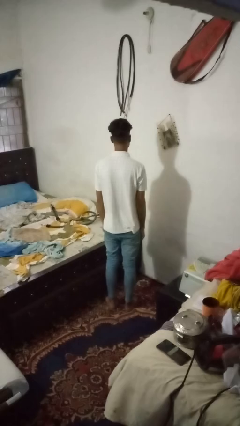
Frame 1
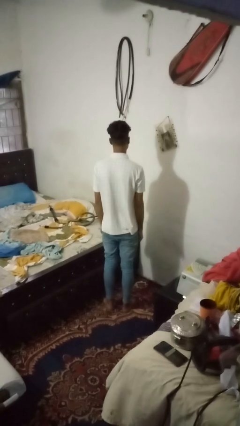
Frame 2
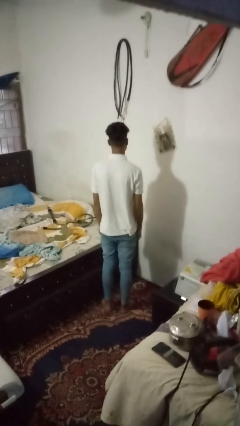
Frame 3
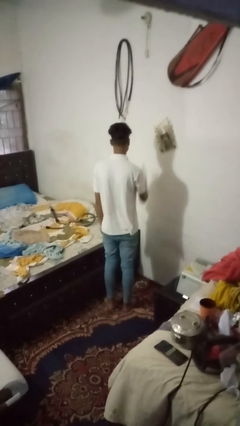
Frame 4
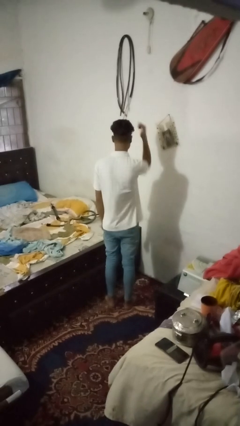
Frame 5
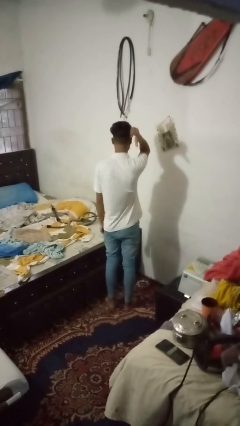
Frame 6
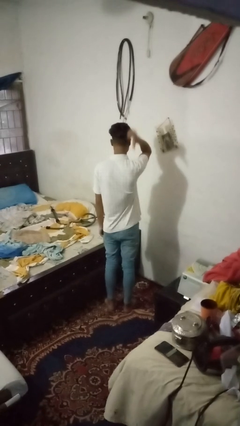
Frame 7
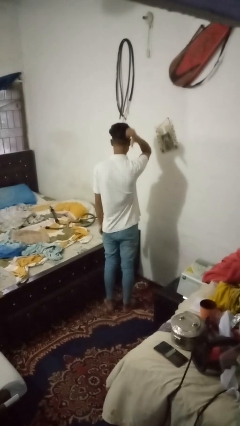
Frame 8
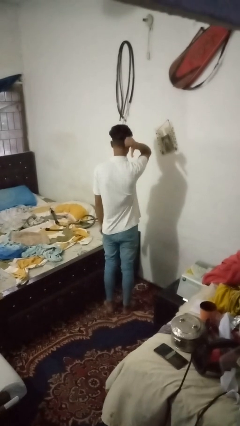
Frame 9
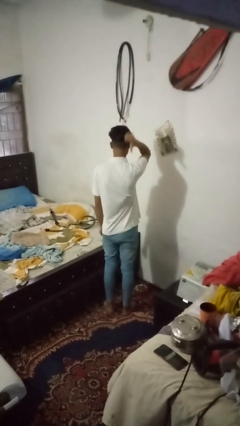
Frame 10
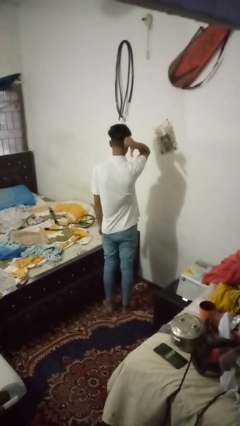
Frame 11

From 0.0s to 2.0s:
person gestures behind me

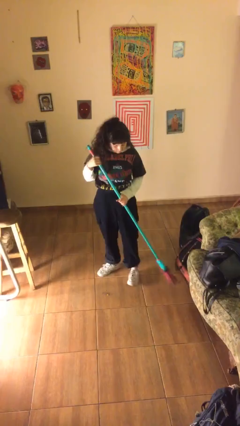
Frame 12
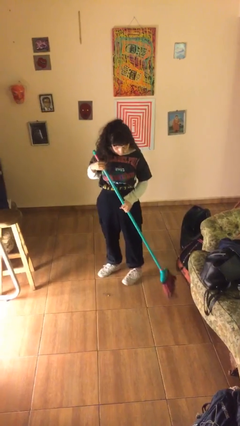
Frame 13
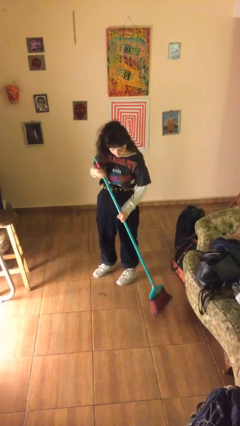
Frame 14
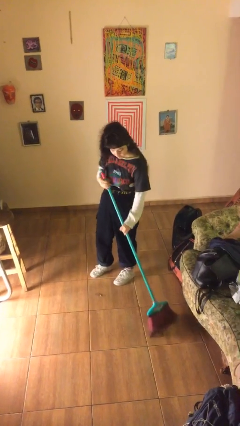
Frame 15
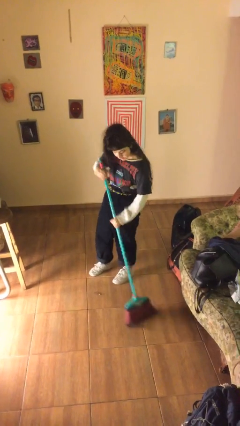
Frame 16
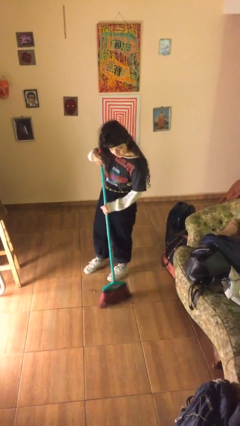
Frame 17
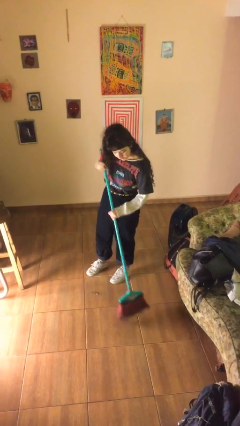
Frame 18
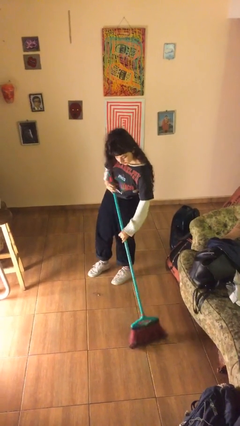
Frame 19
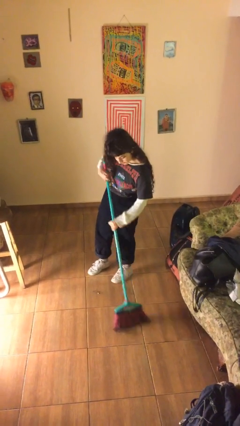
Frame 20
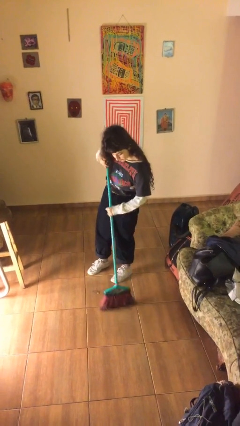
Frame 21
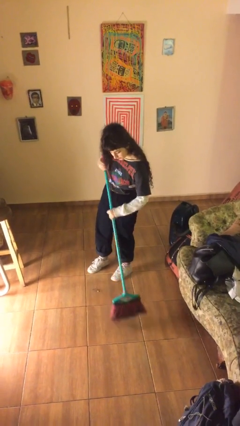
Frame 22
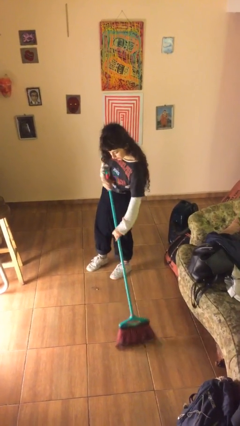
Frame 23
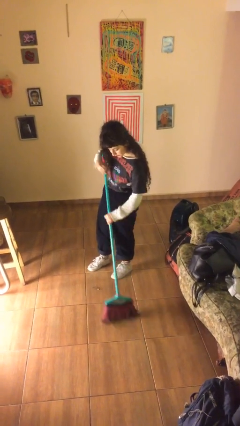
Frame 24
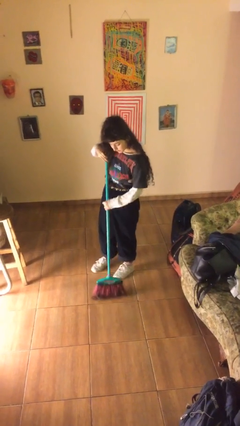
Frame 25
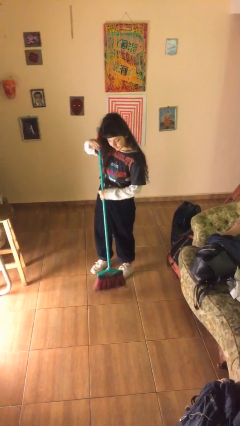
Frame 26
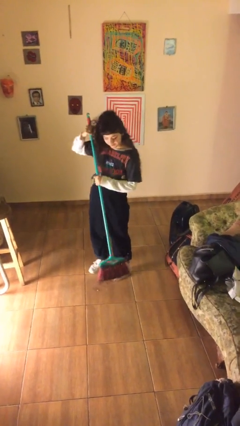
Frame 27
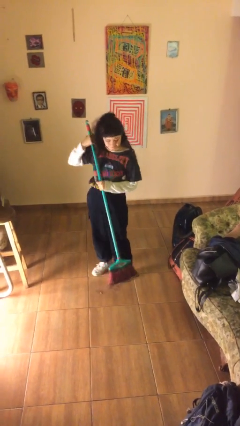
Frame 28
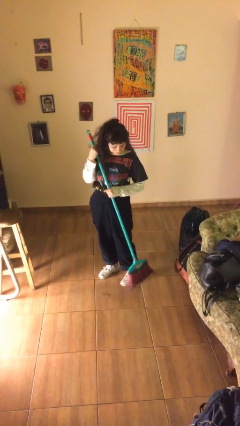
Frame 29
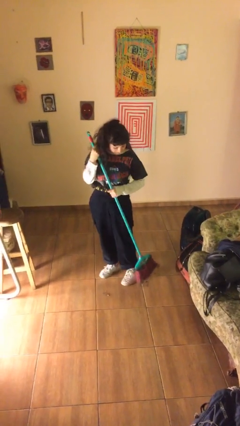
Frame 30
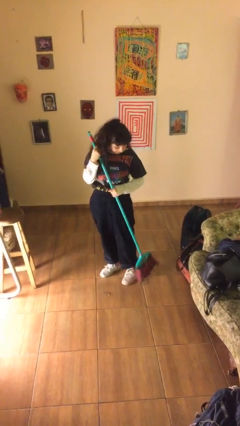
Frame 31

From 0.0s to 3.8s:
person sweeps floor

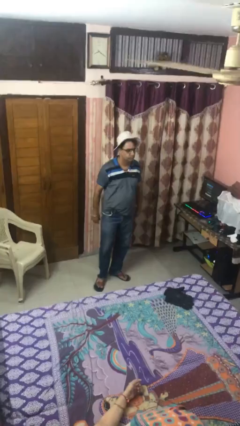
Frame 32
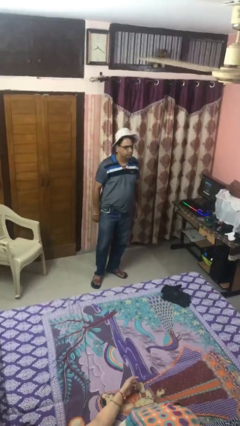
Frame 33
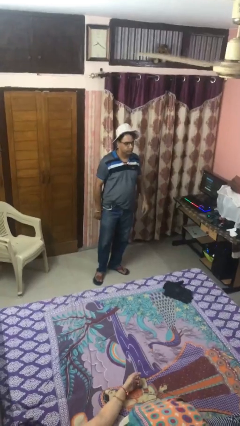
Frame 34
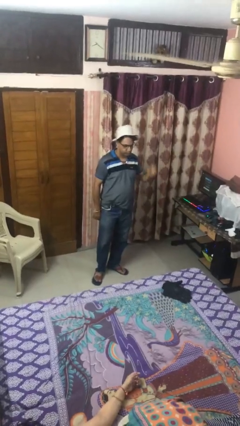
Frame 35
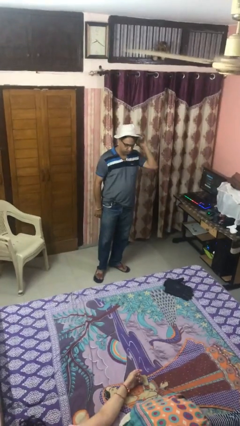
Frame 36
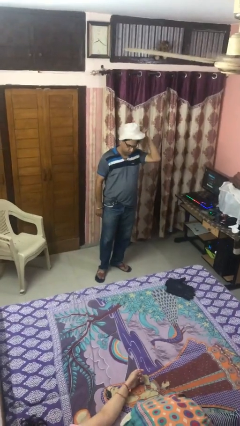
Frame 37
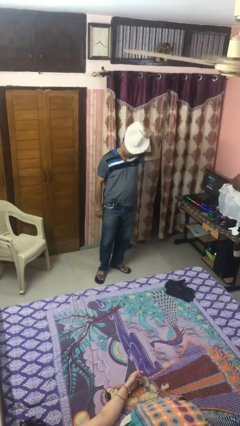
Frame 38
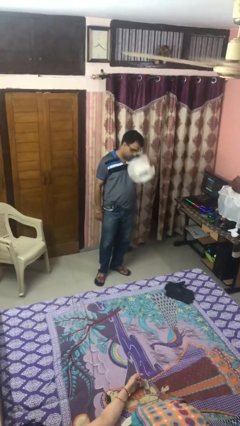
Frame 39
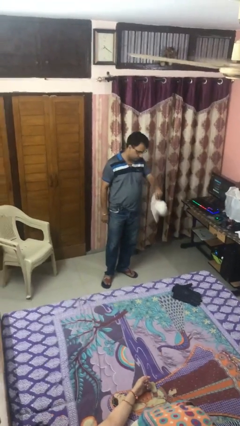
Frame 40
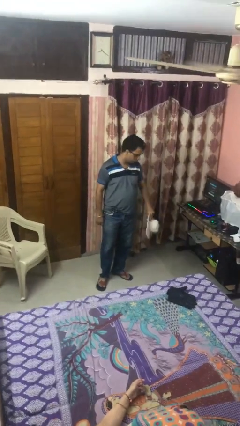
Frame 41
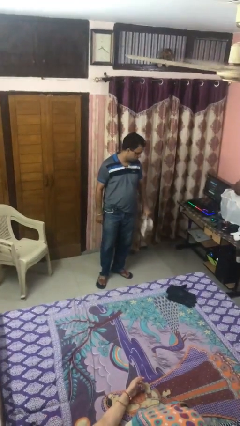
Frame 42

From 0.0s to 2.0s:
person takes off hat

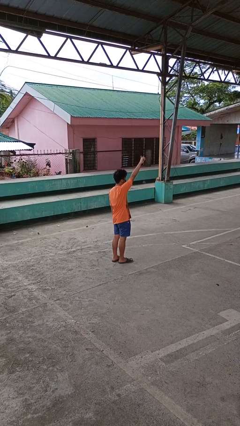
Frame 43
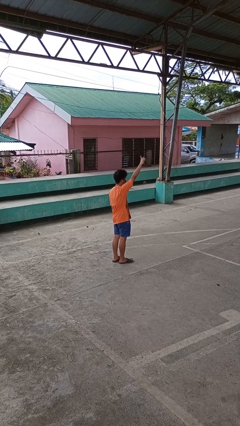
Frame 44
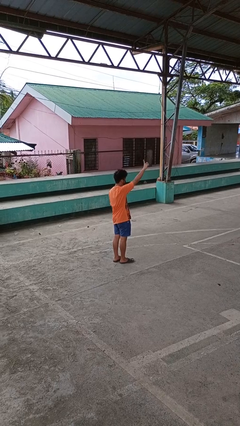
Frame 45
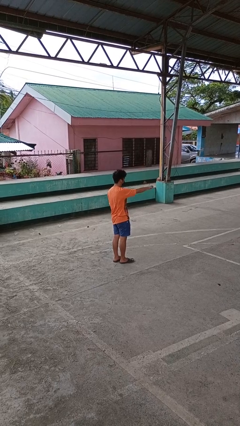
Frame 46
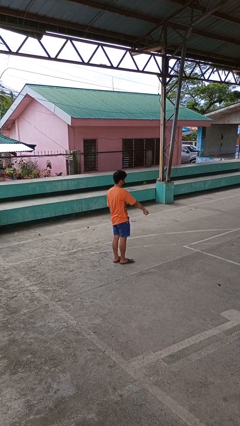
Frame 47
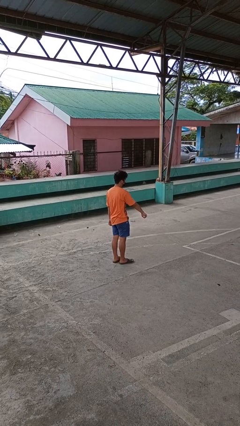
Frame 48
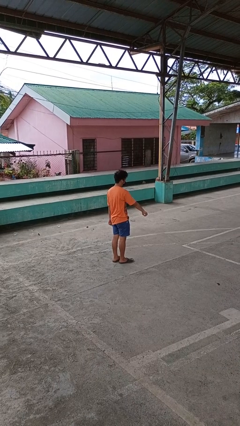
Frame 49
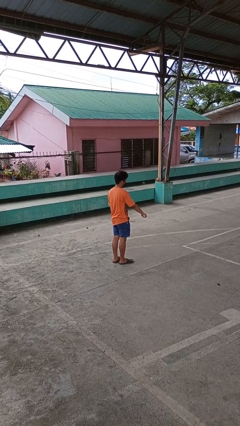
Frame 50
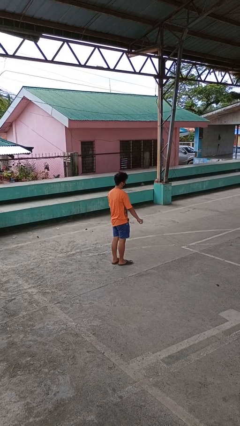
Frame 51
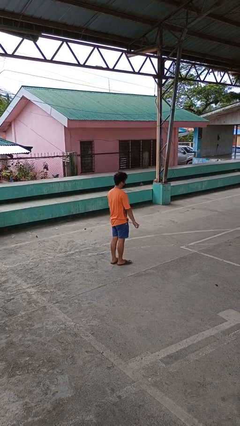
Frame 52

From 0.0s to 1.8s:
person gestures swipe down

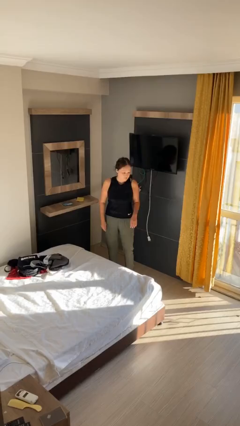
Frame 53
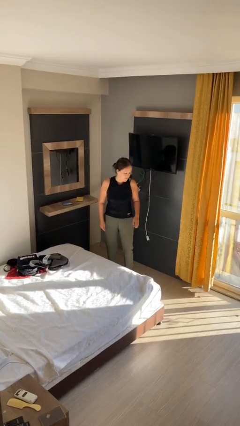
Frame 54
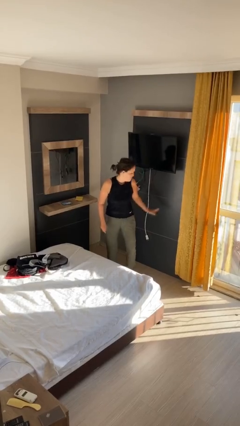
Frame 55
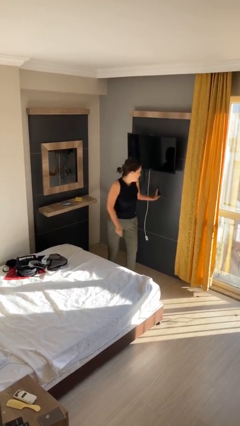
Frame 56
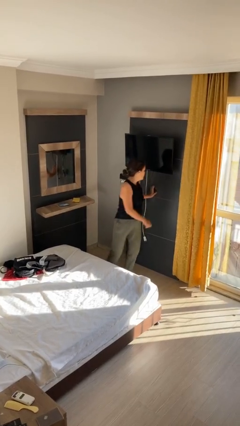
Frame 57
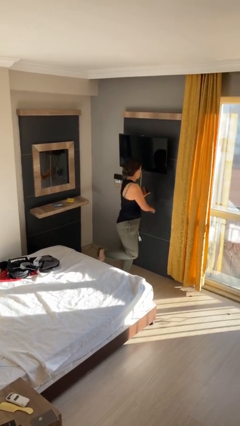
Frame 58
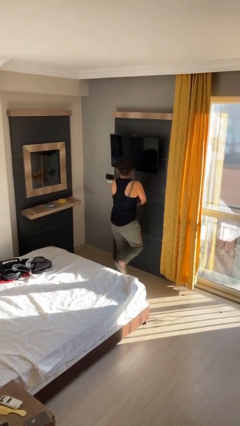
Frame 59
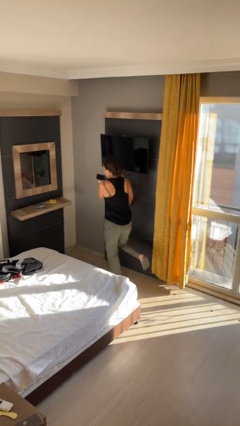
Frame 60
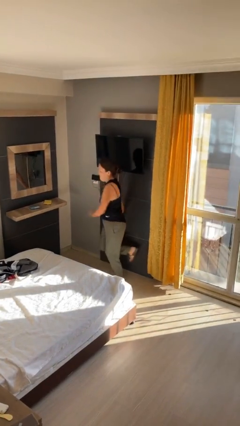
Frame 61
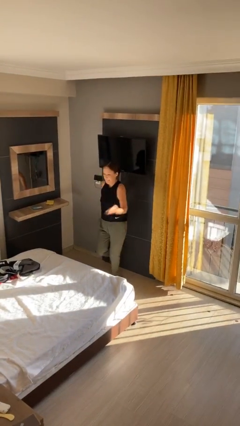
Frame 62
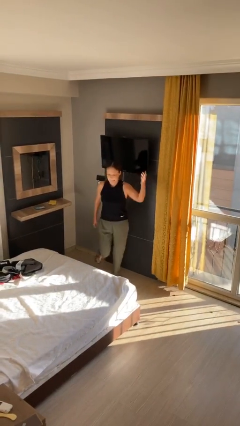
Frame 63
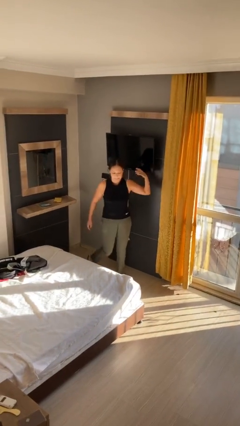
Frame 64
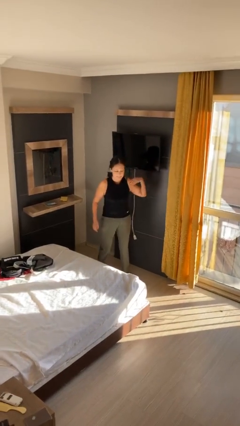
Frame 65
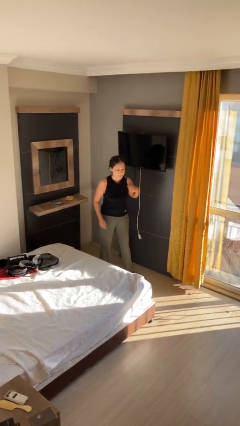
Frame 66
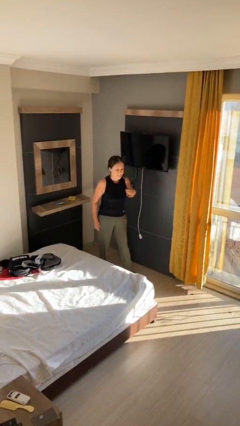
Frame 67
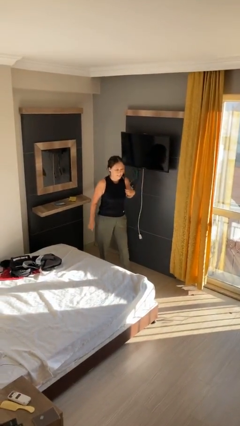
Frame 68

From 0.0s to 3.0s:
person twirls

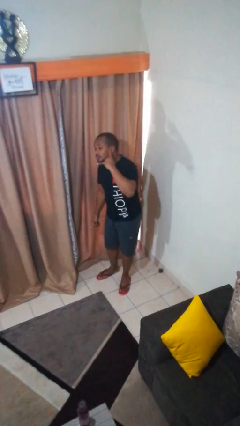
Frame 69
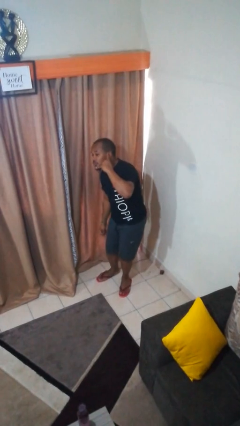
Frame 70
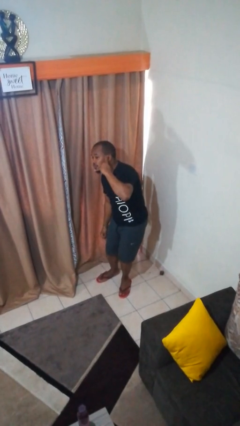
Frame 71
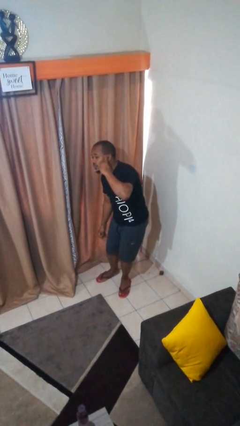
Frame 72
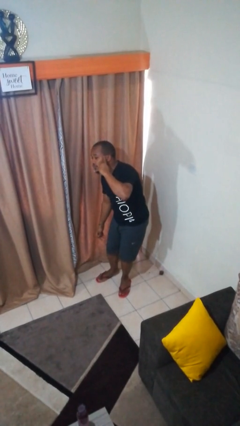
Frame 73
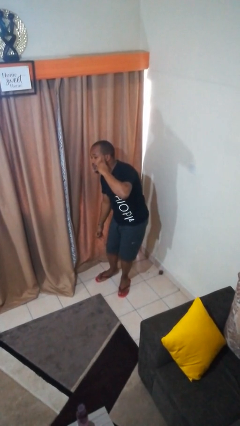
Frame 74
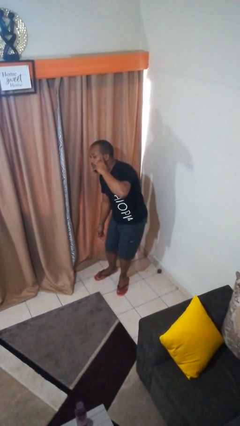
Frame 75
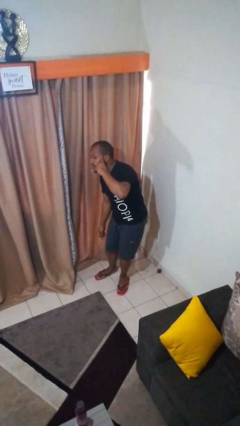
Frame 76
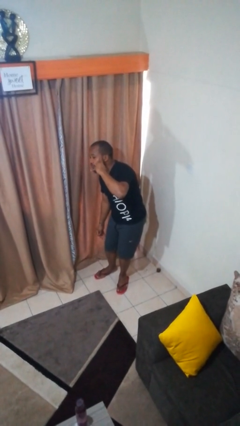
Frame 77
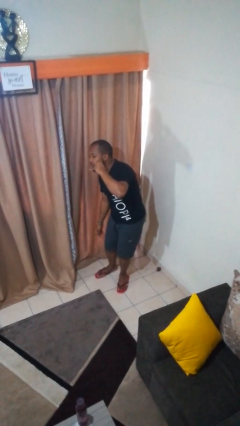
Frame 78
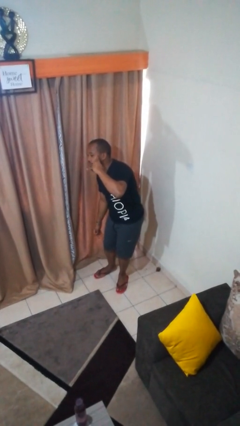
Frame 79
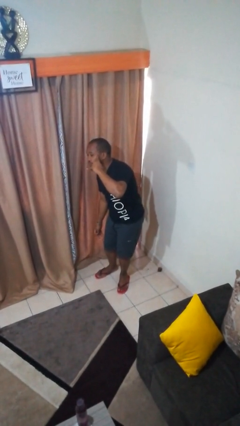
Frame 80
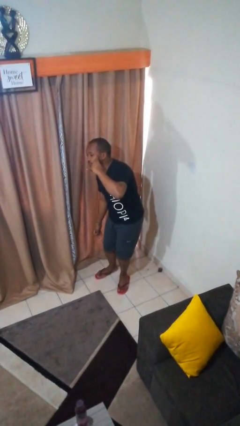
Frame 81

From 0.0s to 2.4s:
person gestures call me

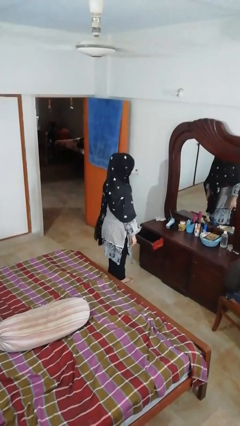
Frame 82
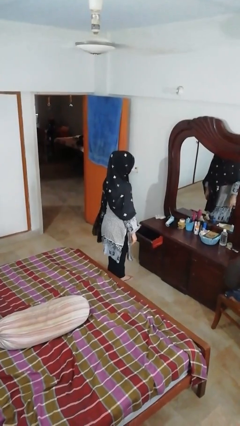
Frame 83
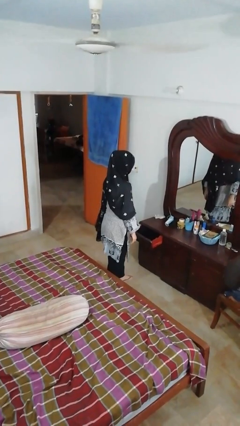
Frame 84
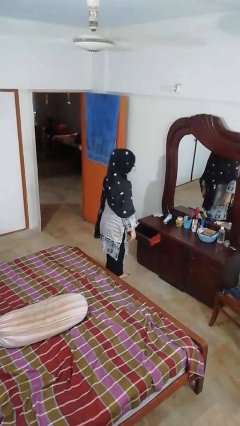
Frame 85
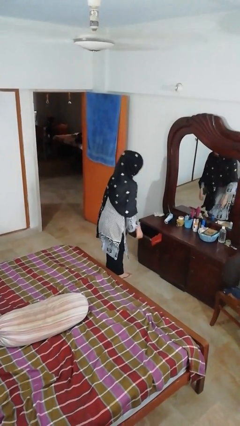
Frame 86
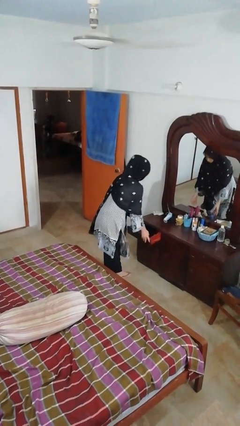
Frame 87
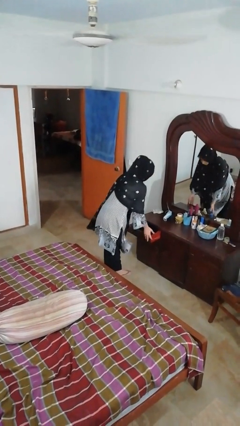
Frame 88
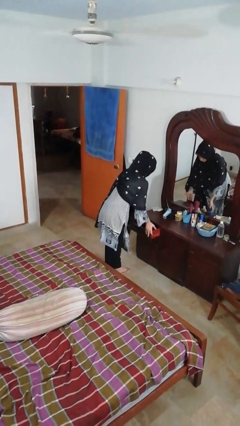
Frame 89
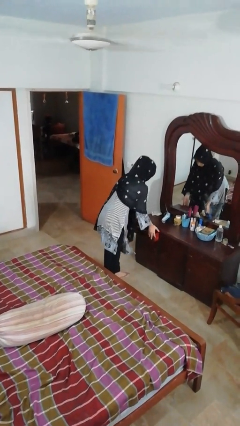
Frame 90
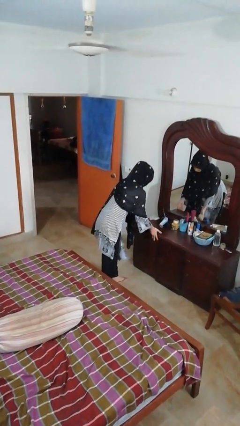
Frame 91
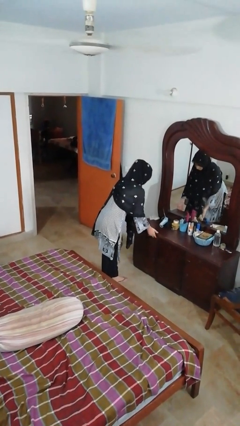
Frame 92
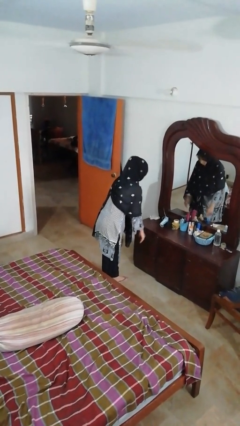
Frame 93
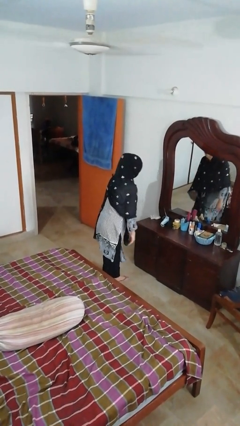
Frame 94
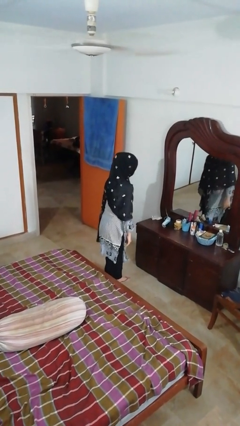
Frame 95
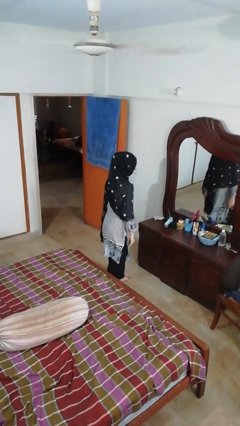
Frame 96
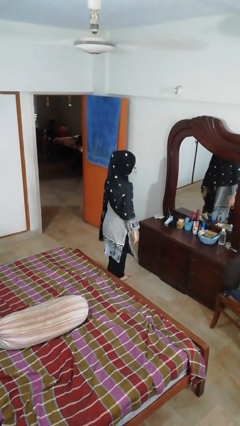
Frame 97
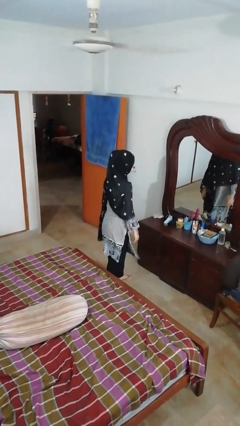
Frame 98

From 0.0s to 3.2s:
person closes dresser drawer
